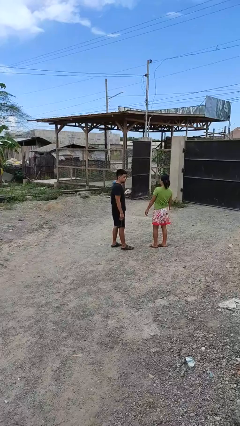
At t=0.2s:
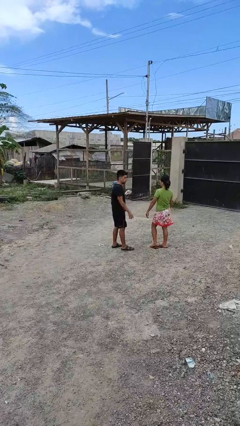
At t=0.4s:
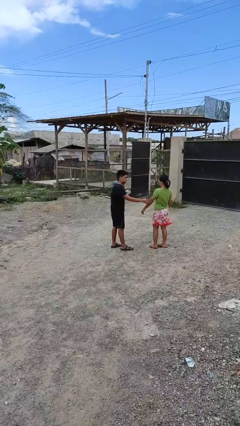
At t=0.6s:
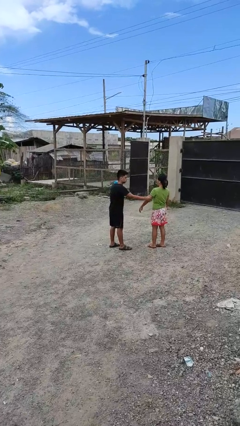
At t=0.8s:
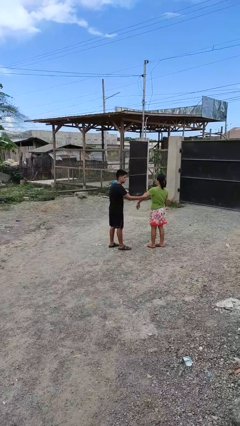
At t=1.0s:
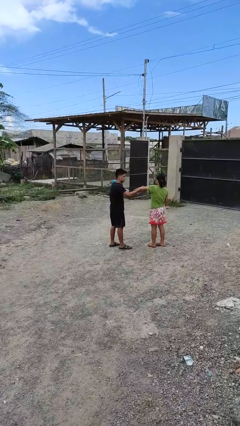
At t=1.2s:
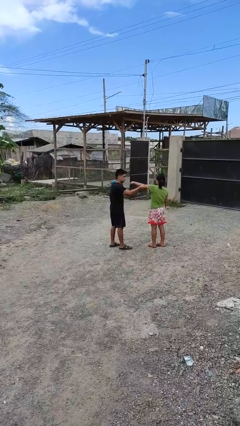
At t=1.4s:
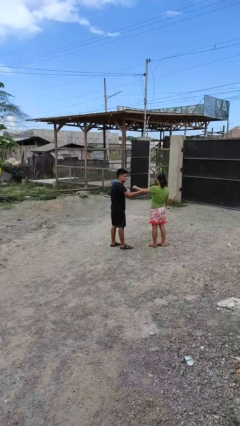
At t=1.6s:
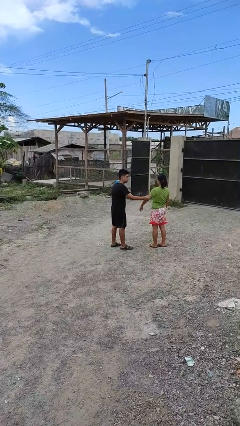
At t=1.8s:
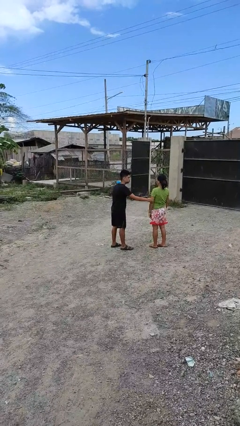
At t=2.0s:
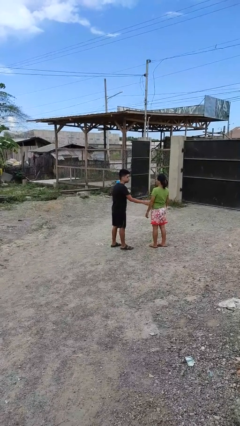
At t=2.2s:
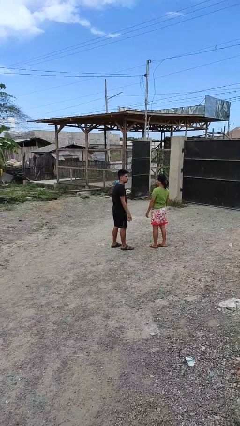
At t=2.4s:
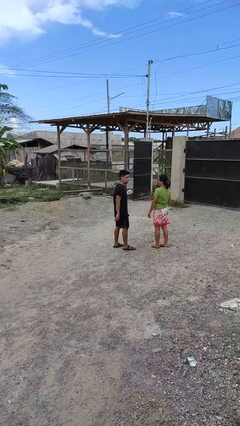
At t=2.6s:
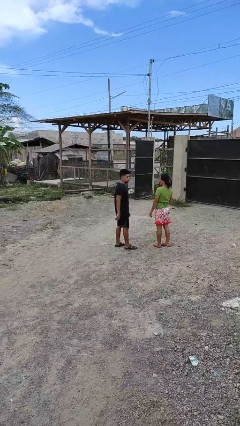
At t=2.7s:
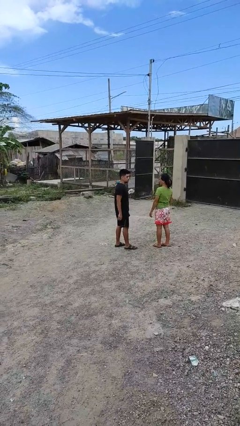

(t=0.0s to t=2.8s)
person grabs person by bicep

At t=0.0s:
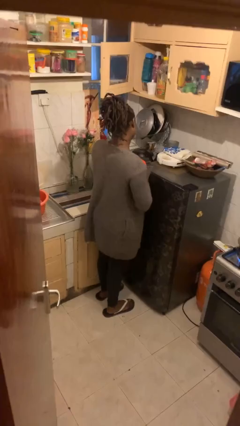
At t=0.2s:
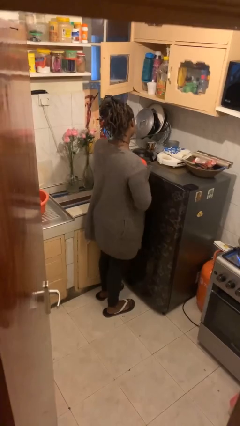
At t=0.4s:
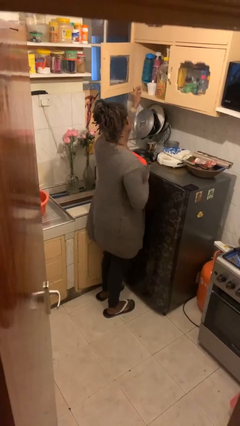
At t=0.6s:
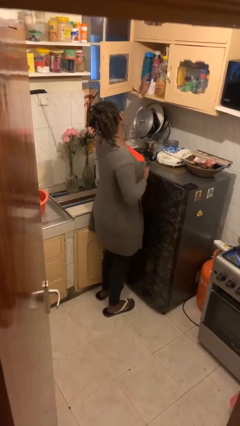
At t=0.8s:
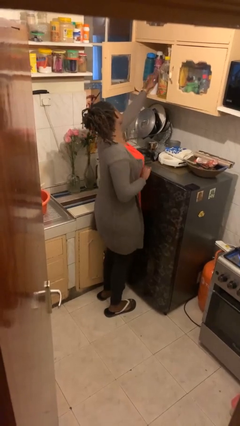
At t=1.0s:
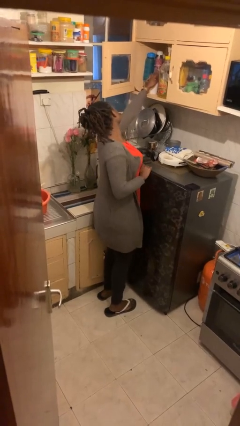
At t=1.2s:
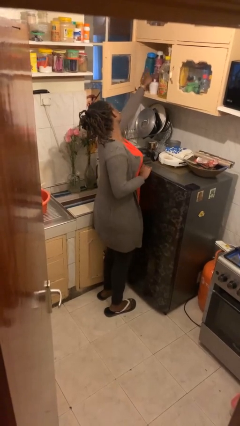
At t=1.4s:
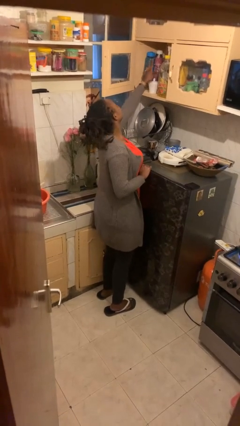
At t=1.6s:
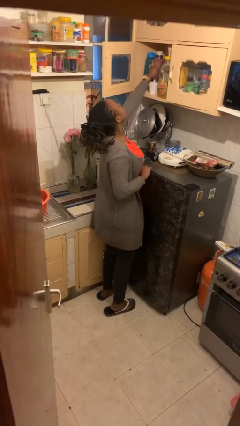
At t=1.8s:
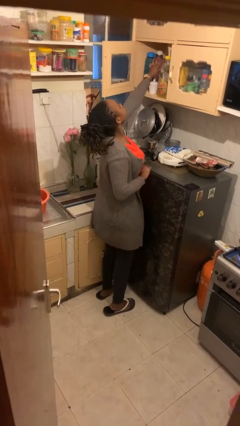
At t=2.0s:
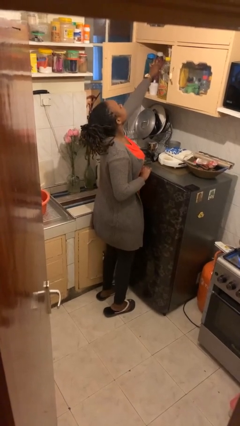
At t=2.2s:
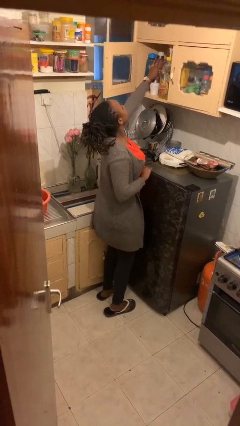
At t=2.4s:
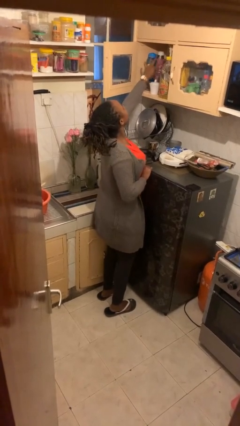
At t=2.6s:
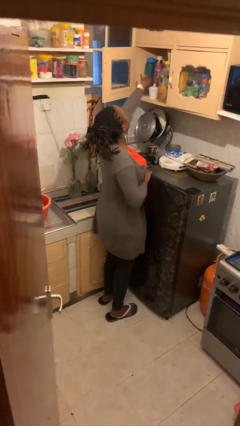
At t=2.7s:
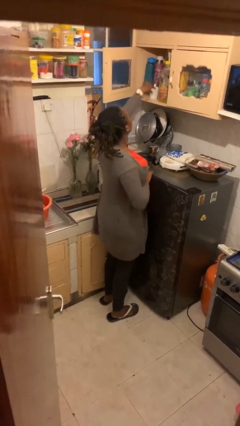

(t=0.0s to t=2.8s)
person searches in cabinet

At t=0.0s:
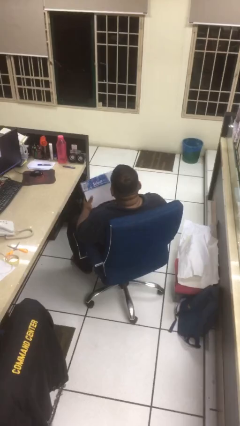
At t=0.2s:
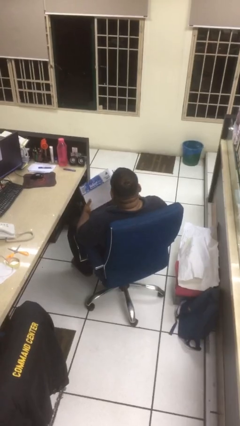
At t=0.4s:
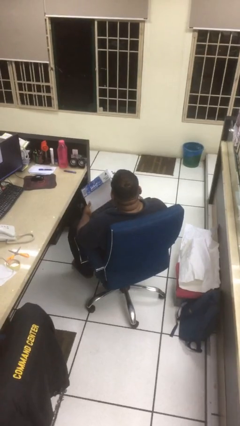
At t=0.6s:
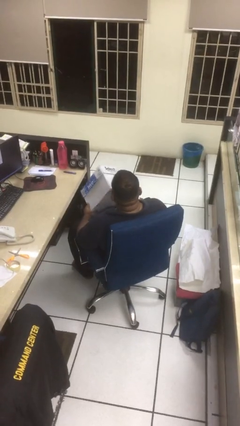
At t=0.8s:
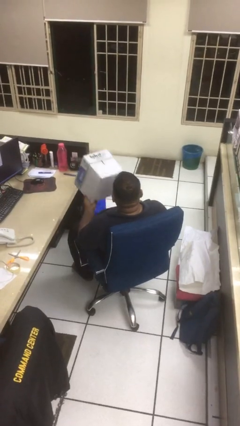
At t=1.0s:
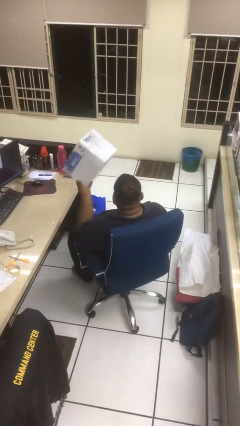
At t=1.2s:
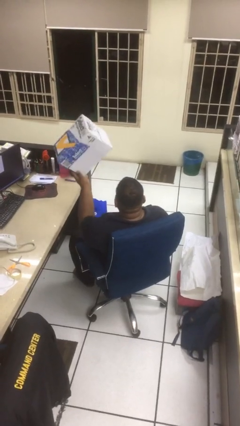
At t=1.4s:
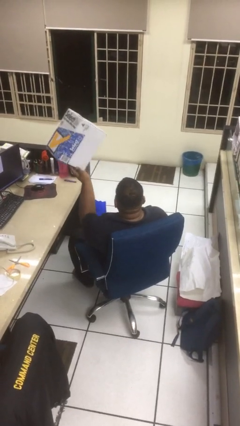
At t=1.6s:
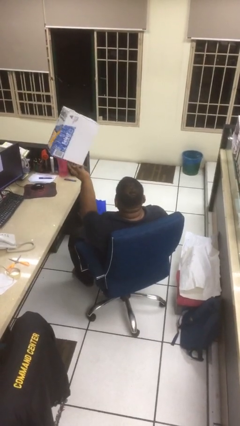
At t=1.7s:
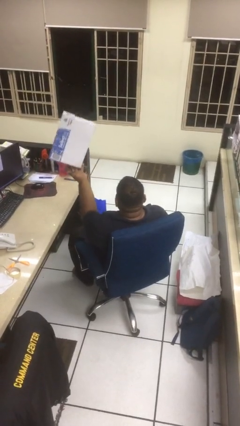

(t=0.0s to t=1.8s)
person holds object above head

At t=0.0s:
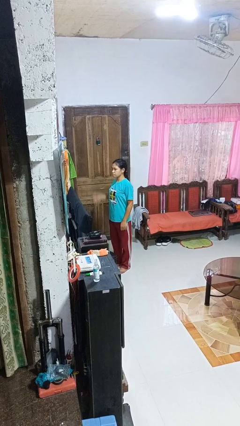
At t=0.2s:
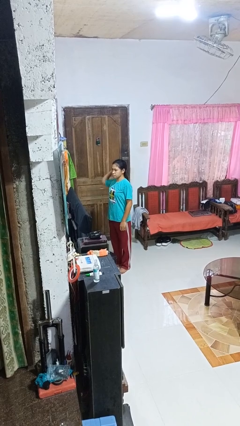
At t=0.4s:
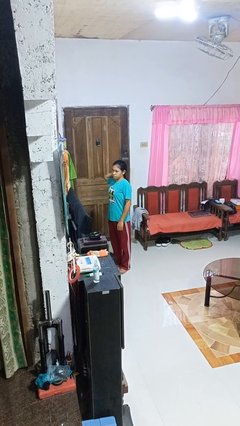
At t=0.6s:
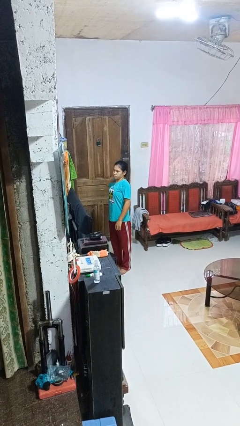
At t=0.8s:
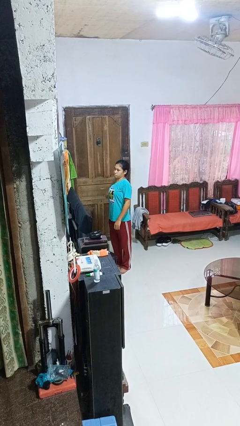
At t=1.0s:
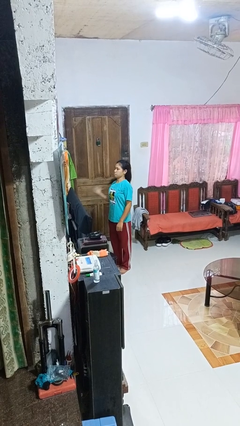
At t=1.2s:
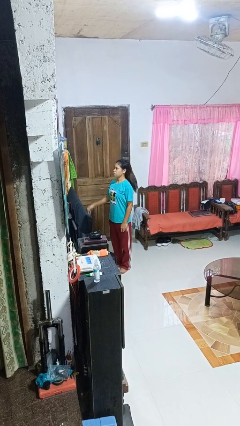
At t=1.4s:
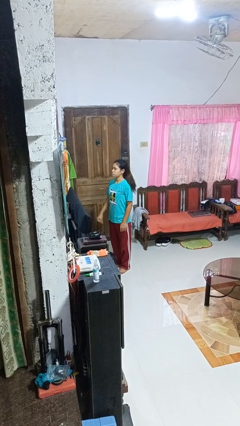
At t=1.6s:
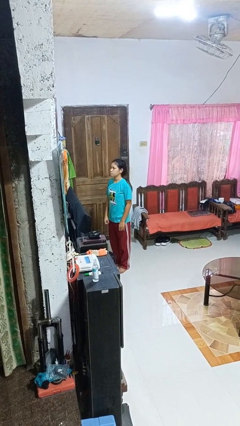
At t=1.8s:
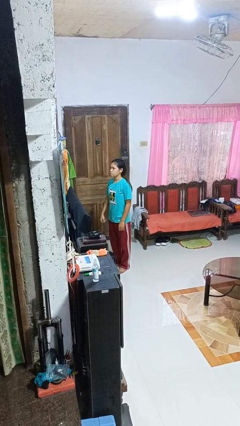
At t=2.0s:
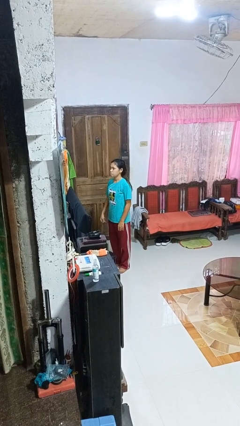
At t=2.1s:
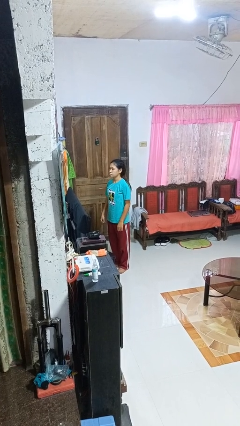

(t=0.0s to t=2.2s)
person takes off hairtie

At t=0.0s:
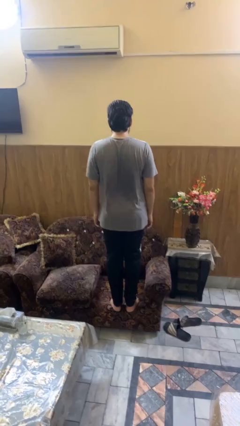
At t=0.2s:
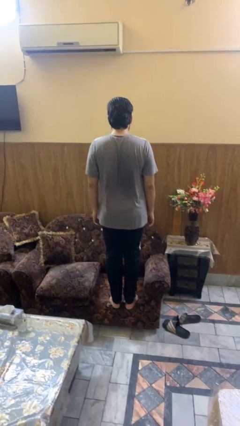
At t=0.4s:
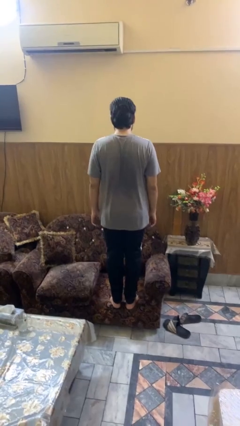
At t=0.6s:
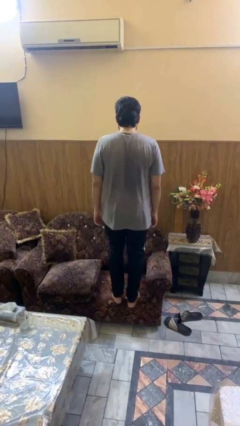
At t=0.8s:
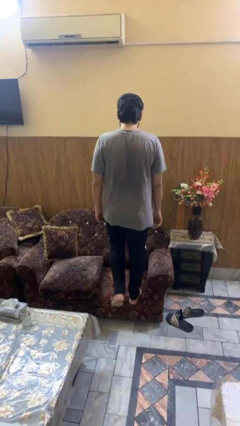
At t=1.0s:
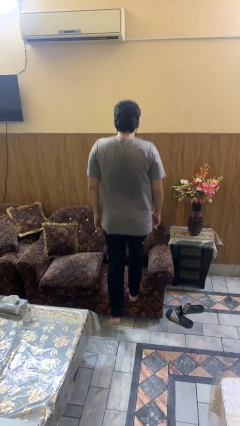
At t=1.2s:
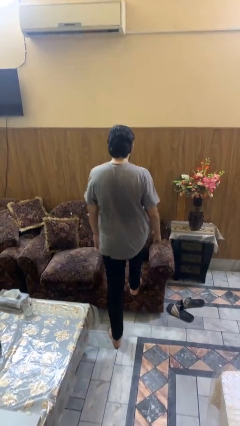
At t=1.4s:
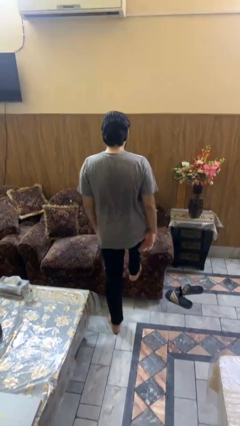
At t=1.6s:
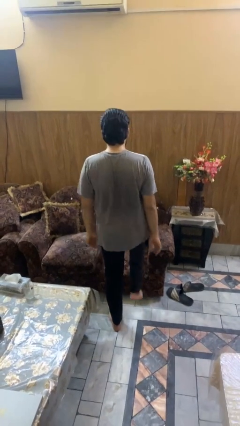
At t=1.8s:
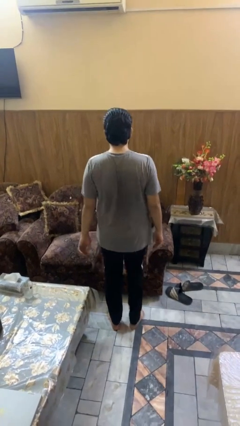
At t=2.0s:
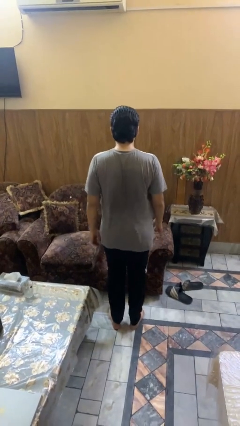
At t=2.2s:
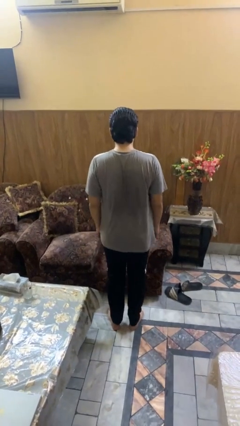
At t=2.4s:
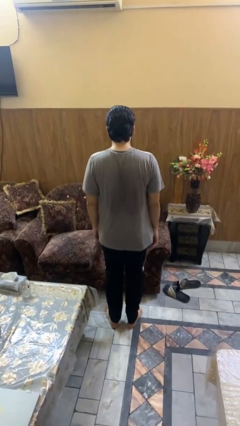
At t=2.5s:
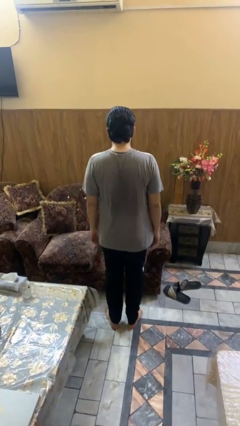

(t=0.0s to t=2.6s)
person climbs off couch

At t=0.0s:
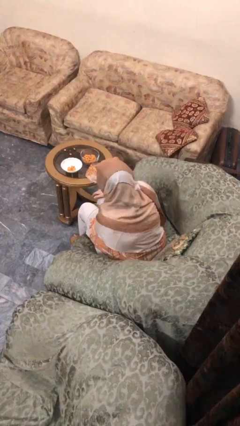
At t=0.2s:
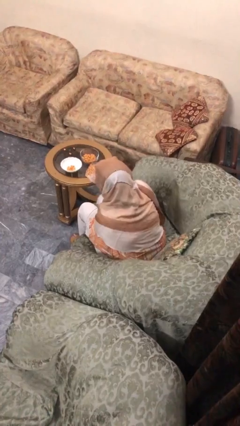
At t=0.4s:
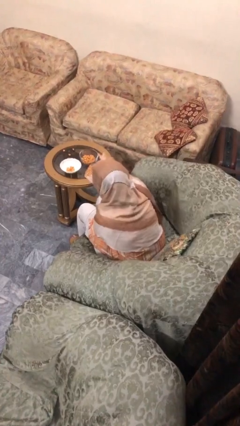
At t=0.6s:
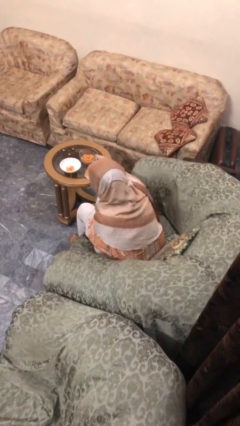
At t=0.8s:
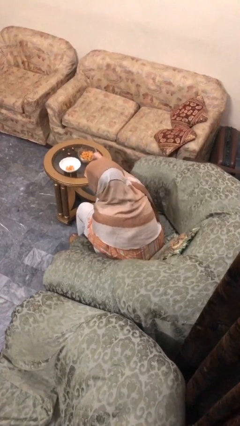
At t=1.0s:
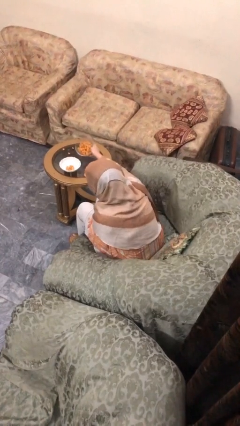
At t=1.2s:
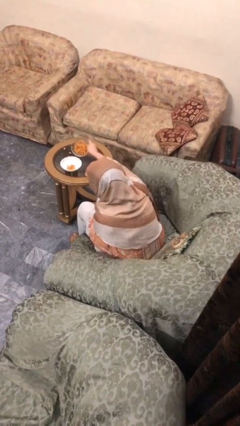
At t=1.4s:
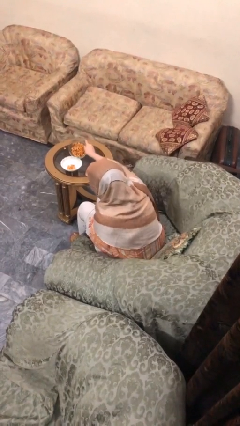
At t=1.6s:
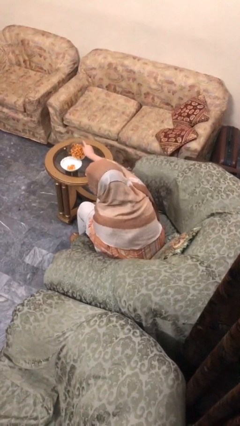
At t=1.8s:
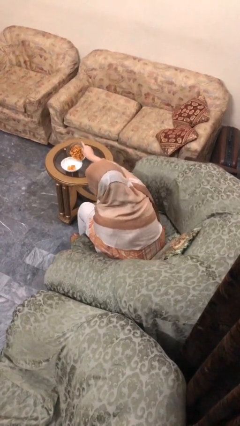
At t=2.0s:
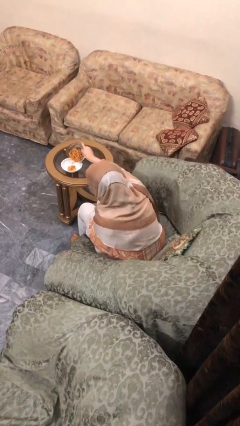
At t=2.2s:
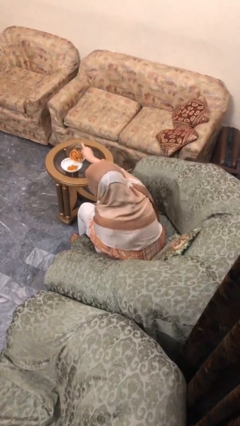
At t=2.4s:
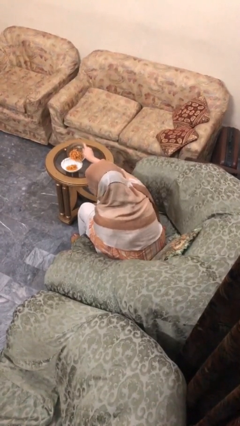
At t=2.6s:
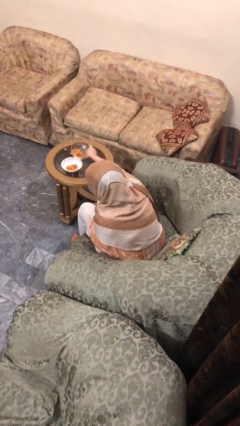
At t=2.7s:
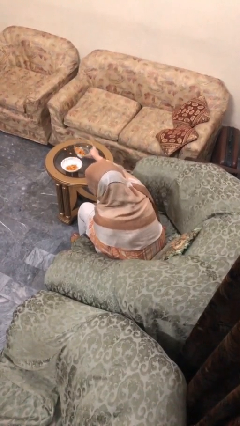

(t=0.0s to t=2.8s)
person pours into bowl

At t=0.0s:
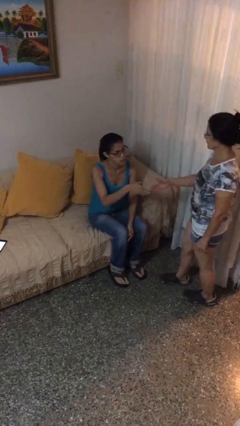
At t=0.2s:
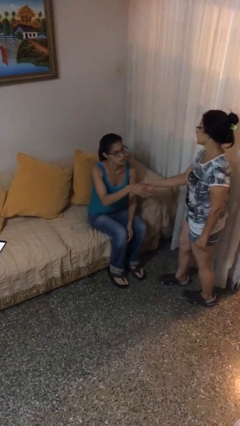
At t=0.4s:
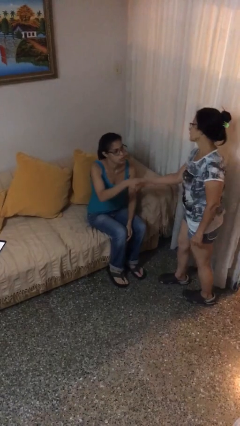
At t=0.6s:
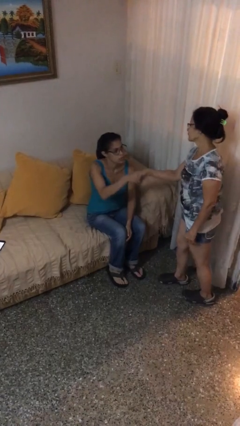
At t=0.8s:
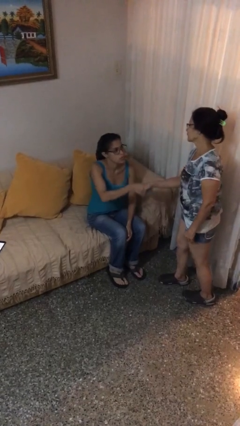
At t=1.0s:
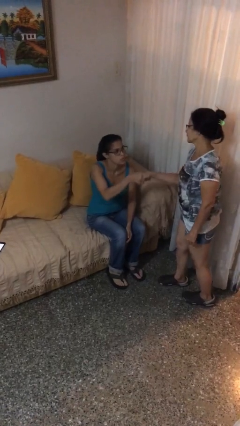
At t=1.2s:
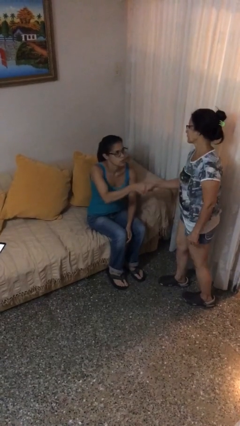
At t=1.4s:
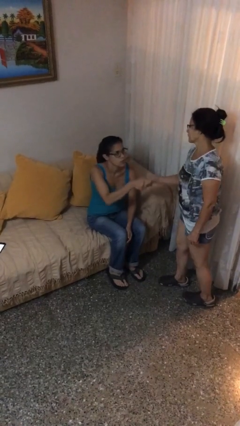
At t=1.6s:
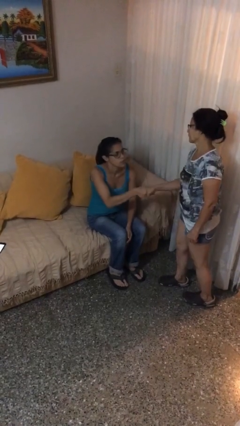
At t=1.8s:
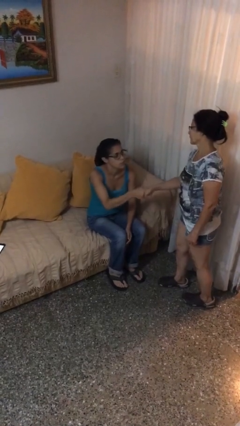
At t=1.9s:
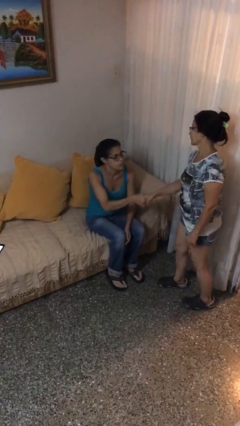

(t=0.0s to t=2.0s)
person shakes hand
